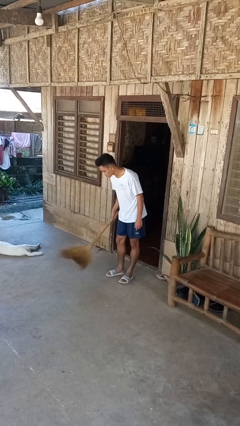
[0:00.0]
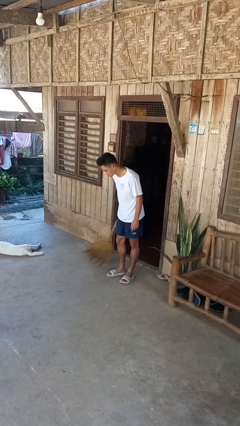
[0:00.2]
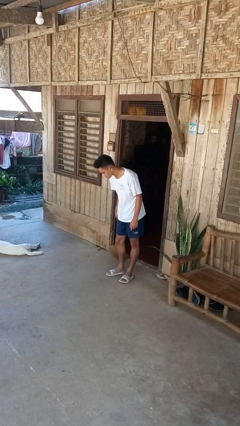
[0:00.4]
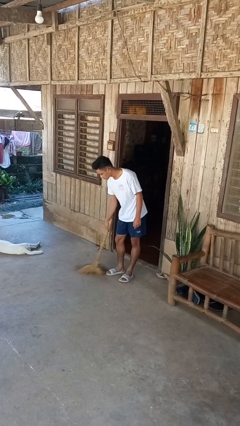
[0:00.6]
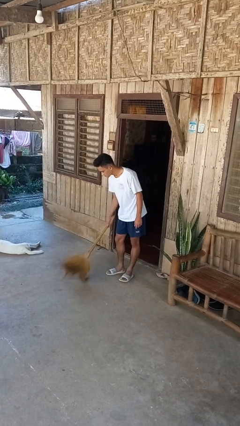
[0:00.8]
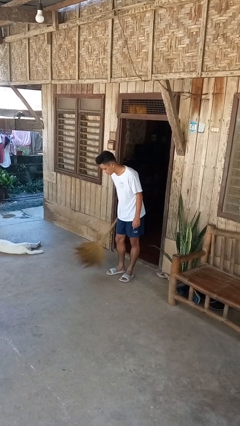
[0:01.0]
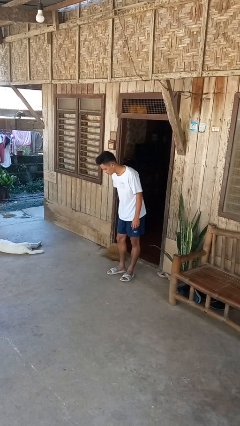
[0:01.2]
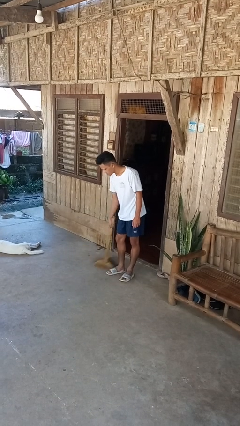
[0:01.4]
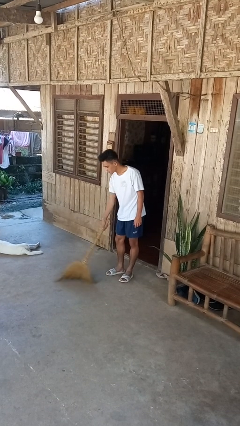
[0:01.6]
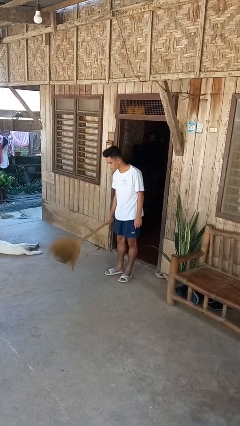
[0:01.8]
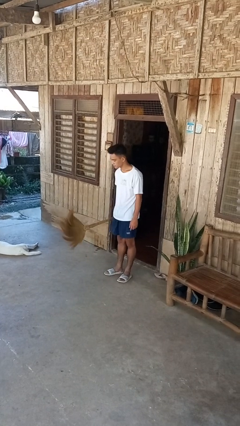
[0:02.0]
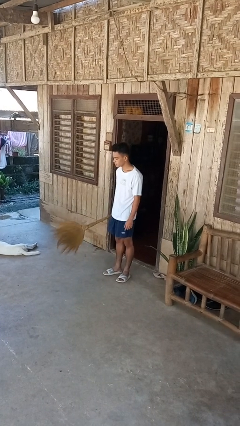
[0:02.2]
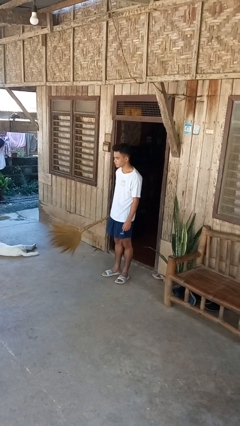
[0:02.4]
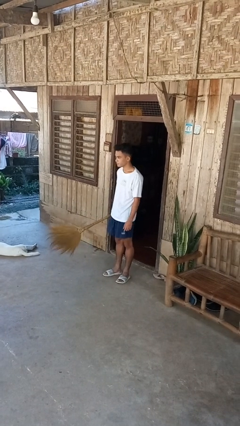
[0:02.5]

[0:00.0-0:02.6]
person sweeps floor

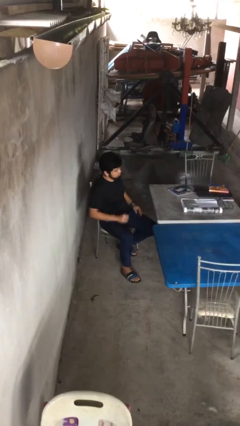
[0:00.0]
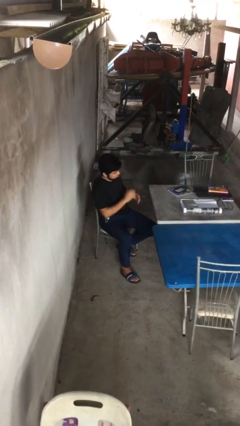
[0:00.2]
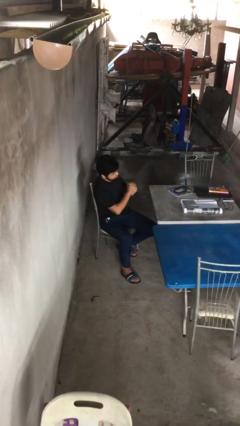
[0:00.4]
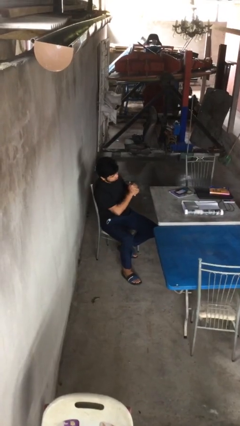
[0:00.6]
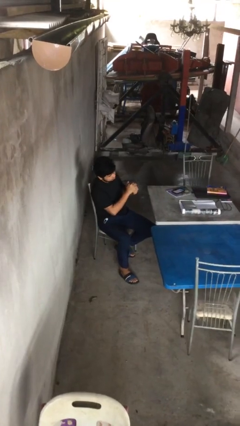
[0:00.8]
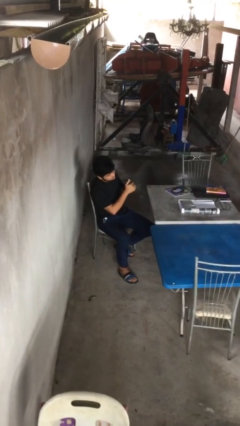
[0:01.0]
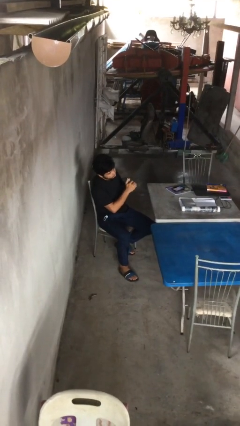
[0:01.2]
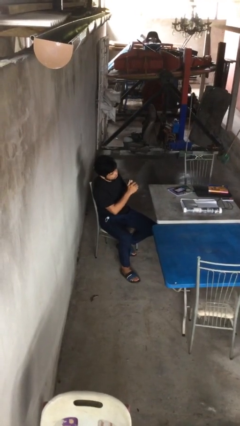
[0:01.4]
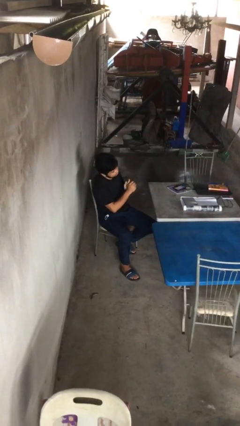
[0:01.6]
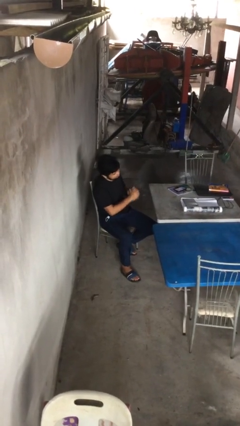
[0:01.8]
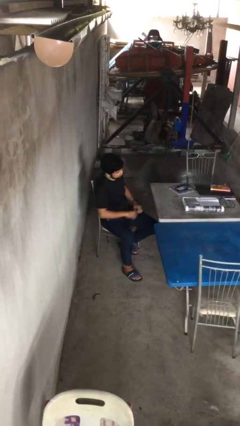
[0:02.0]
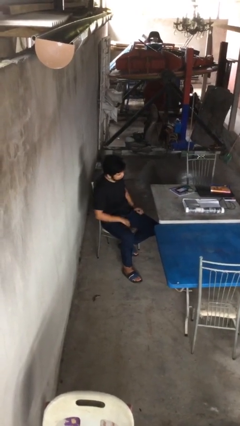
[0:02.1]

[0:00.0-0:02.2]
person cracks knuckles

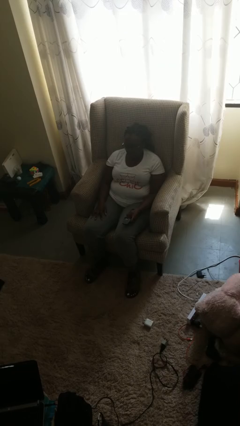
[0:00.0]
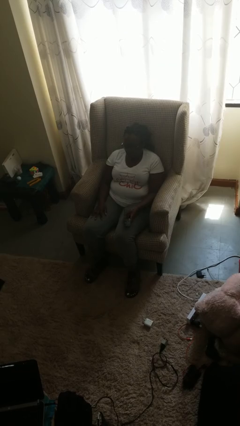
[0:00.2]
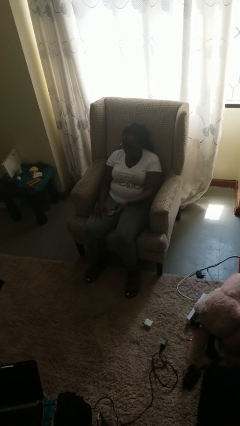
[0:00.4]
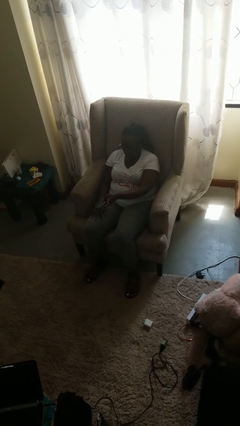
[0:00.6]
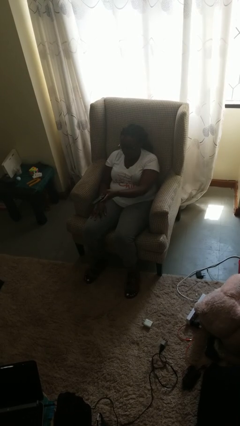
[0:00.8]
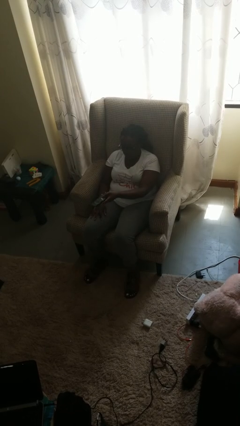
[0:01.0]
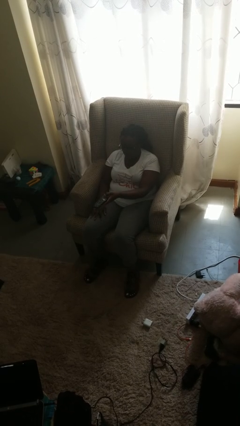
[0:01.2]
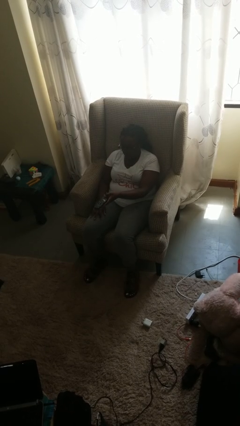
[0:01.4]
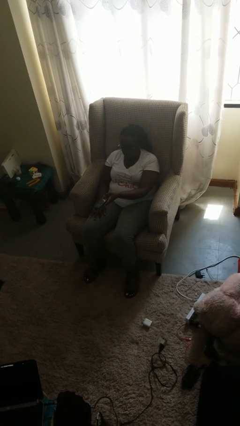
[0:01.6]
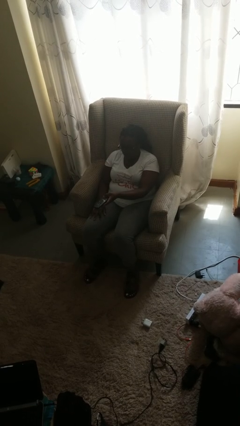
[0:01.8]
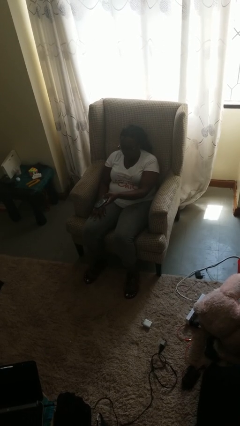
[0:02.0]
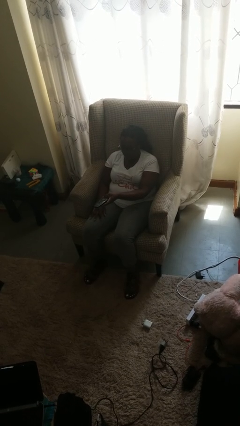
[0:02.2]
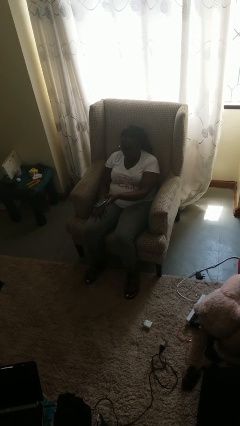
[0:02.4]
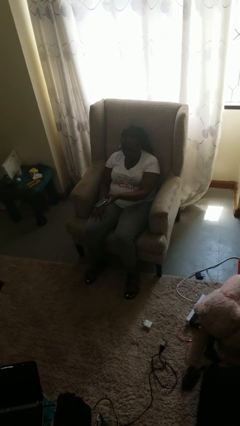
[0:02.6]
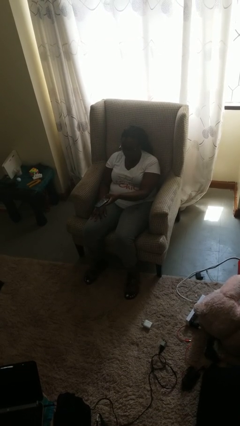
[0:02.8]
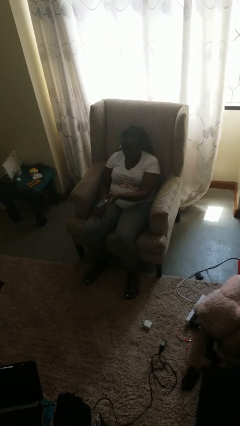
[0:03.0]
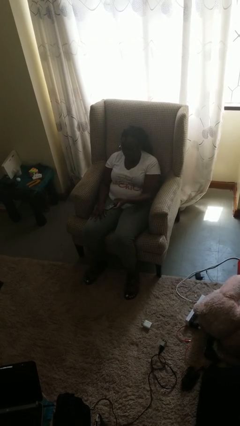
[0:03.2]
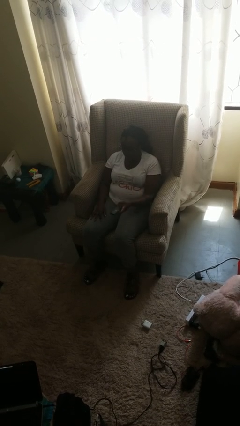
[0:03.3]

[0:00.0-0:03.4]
person uses television remote

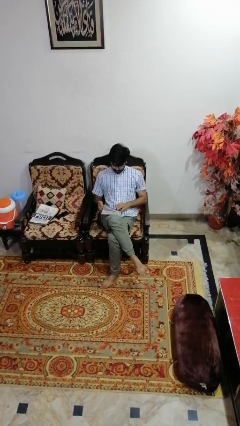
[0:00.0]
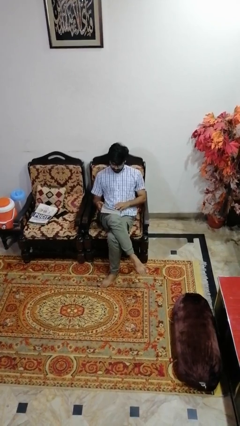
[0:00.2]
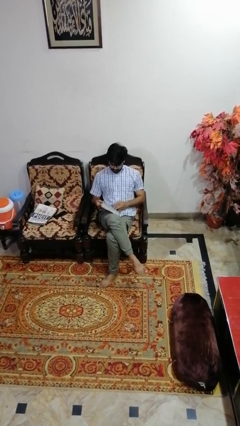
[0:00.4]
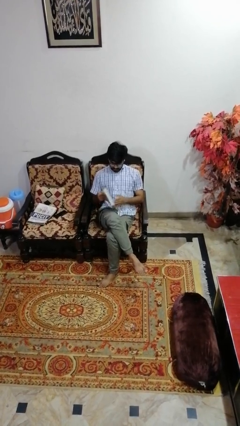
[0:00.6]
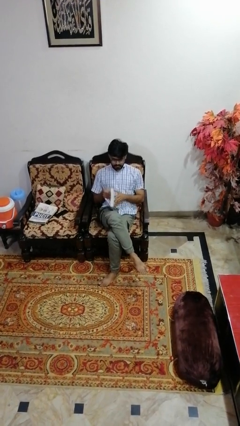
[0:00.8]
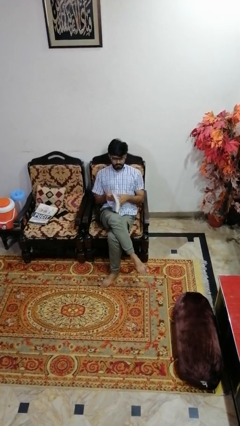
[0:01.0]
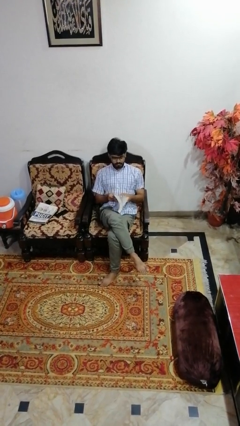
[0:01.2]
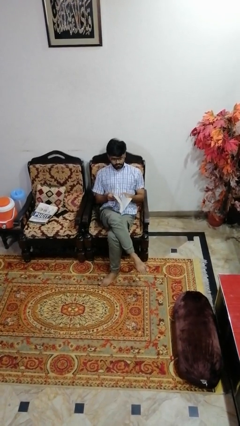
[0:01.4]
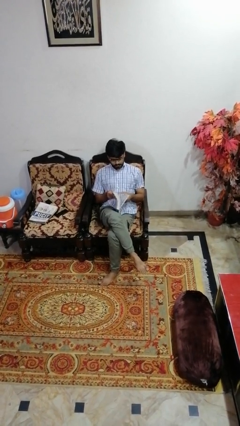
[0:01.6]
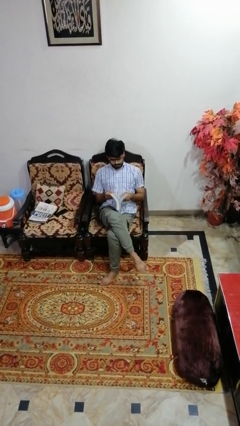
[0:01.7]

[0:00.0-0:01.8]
person looks at wristwatch

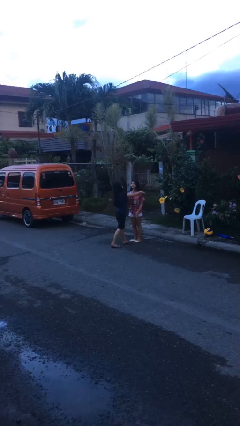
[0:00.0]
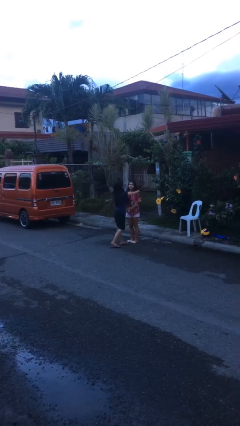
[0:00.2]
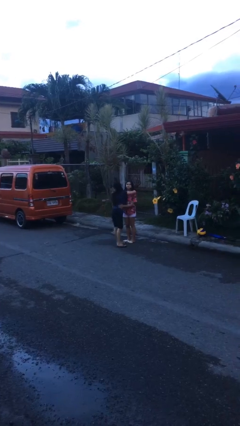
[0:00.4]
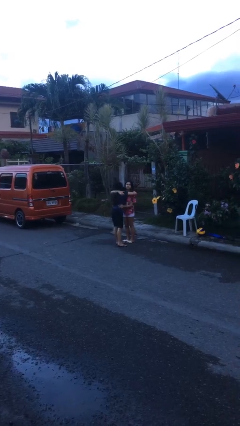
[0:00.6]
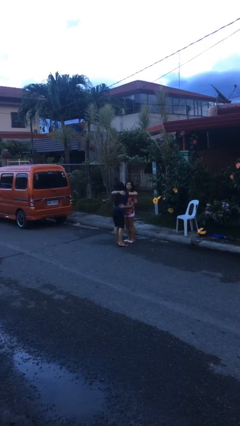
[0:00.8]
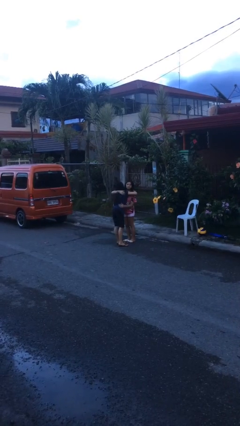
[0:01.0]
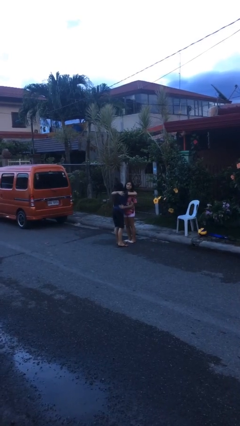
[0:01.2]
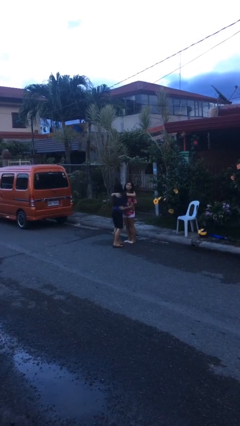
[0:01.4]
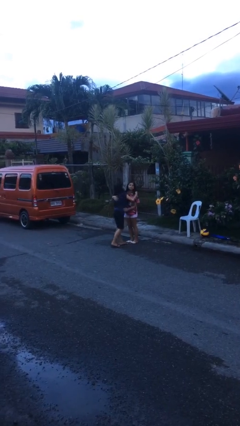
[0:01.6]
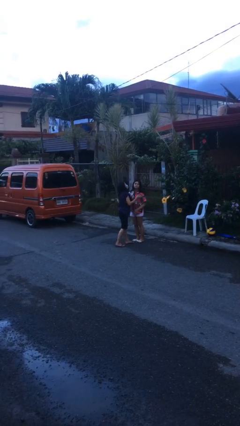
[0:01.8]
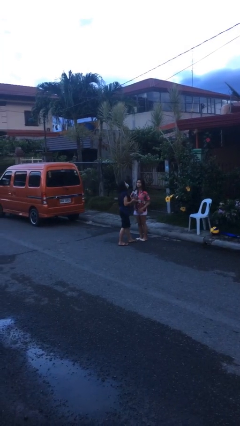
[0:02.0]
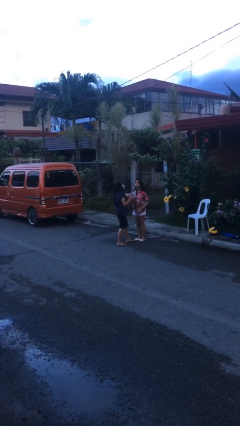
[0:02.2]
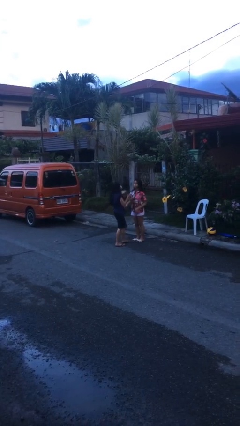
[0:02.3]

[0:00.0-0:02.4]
person embraces person

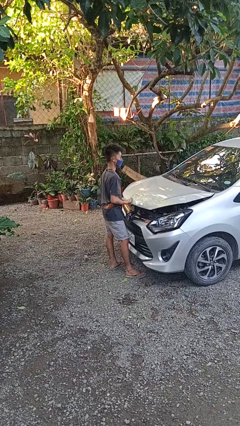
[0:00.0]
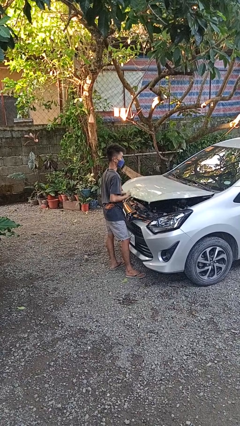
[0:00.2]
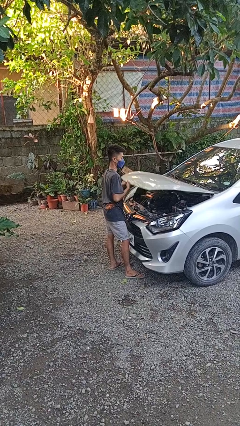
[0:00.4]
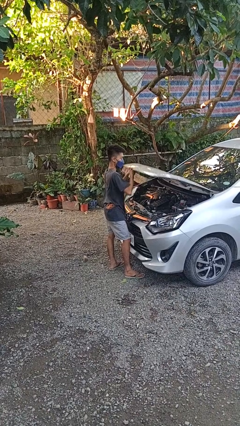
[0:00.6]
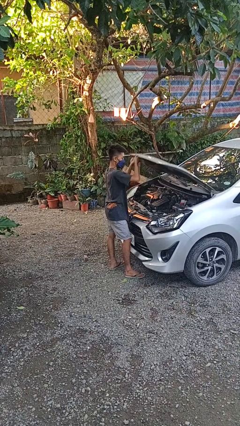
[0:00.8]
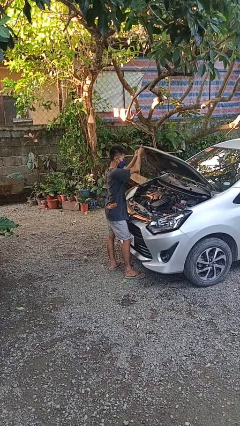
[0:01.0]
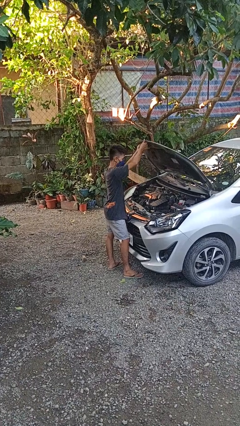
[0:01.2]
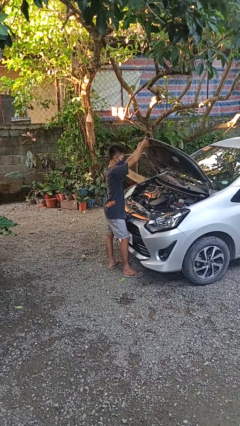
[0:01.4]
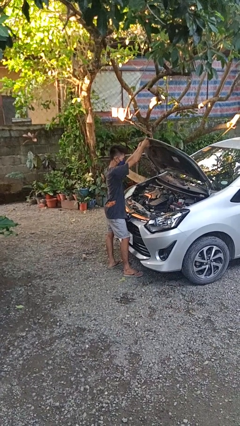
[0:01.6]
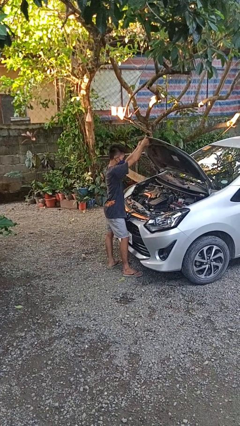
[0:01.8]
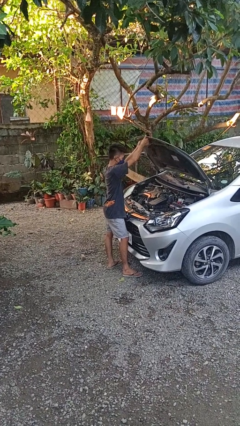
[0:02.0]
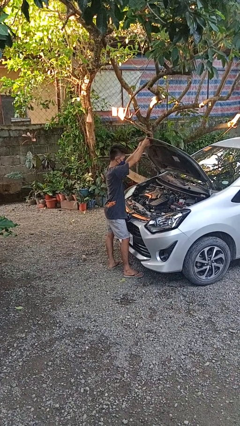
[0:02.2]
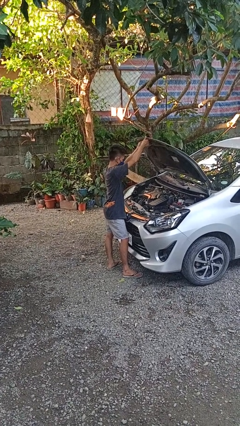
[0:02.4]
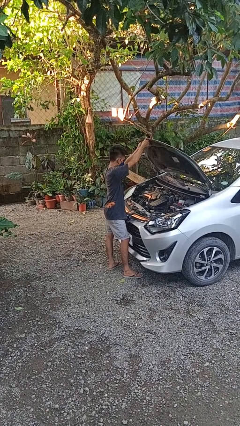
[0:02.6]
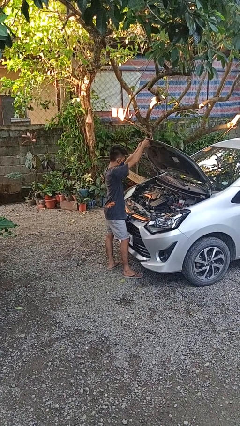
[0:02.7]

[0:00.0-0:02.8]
person opens car hood

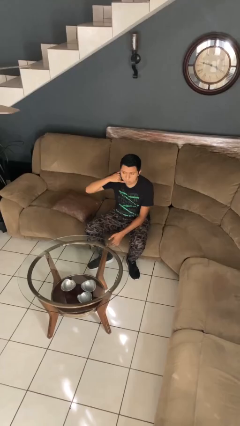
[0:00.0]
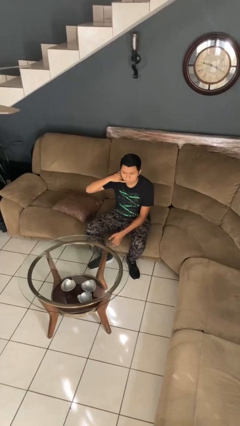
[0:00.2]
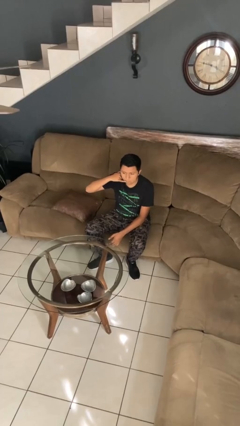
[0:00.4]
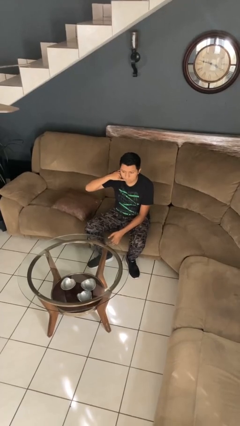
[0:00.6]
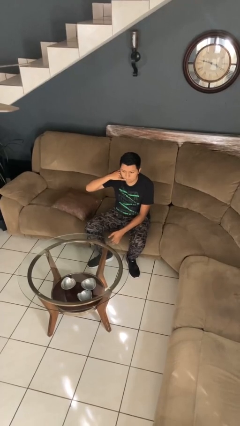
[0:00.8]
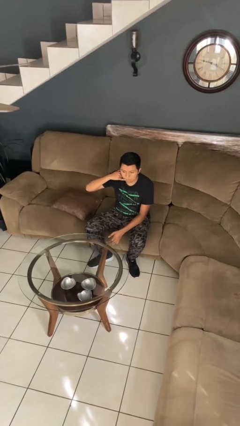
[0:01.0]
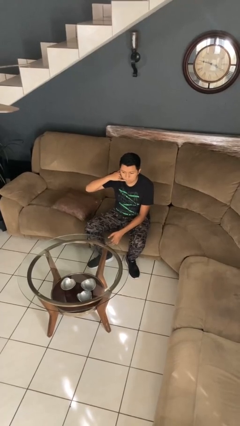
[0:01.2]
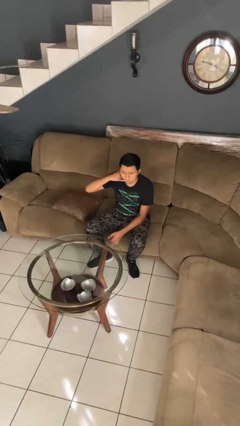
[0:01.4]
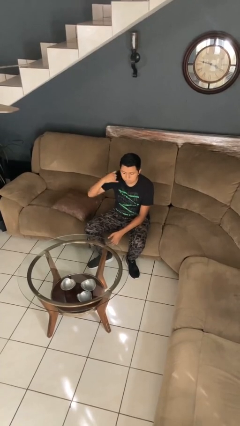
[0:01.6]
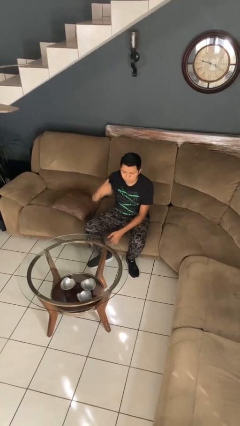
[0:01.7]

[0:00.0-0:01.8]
person gestures call me
